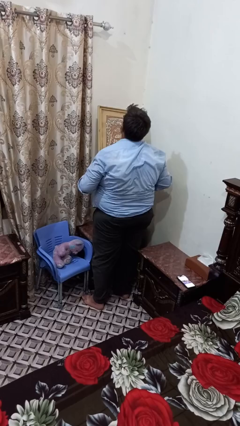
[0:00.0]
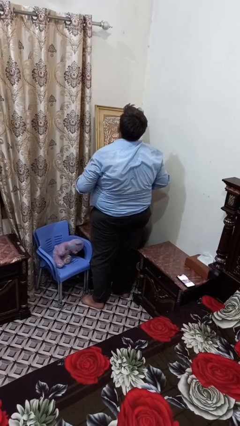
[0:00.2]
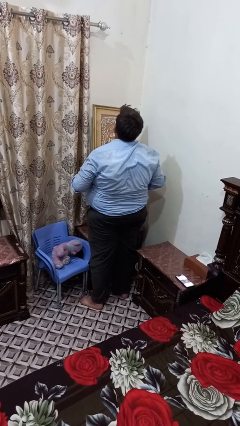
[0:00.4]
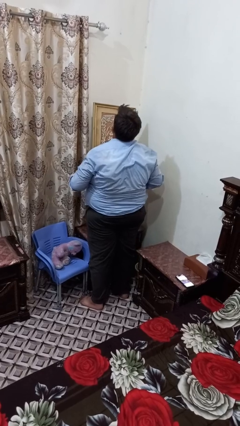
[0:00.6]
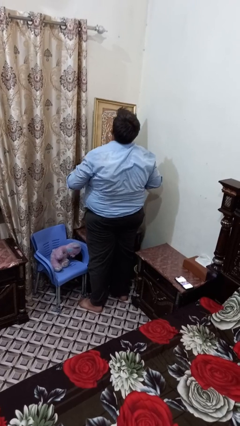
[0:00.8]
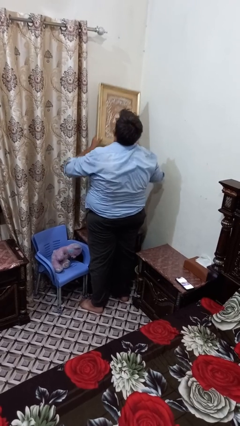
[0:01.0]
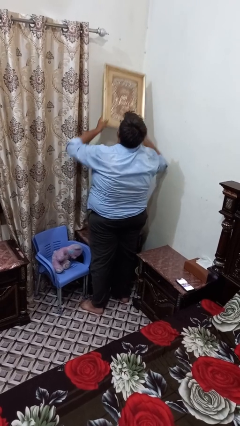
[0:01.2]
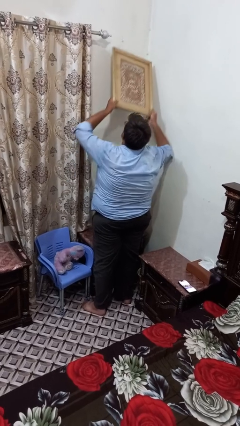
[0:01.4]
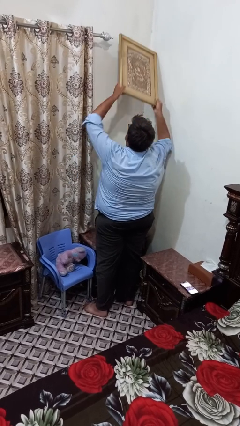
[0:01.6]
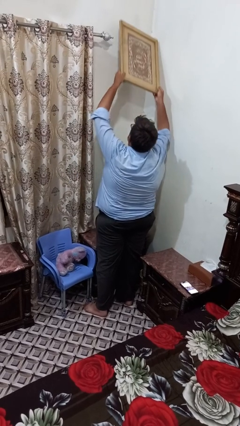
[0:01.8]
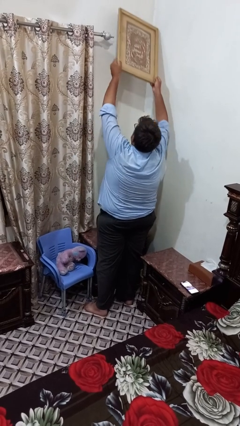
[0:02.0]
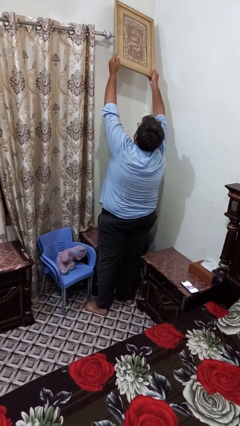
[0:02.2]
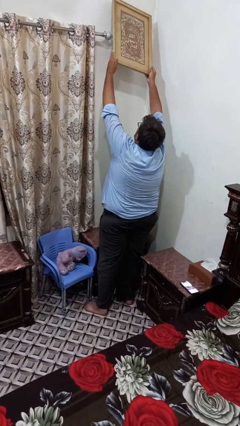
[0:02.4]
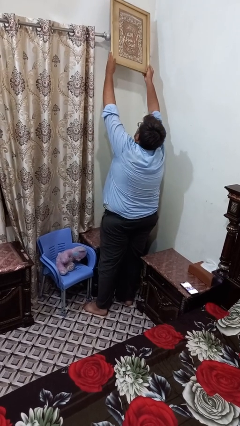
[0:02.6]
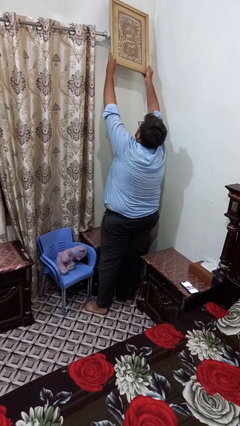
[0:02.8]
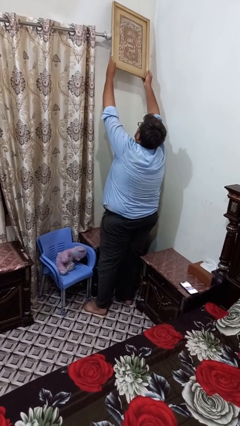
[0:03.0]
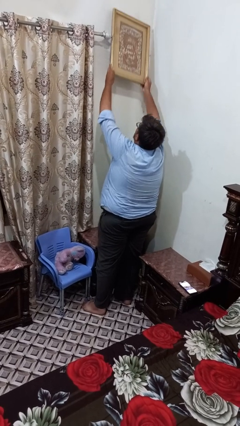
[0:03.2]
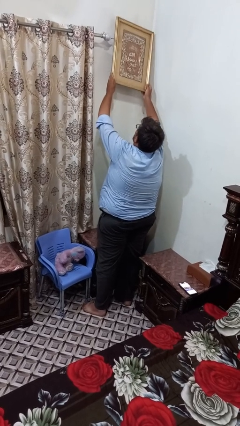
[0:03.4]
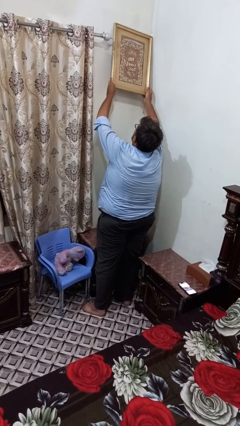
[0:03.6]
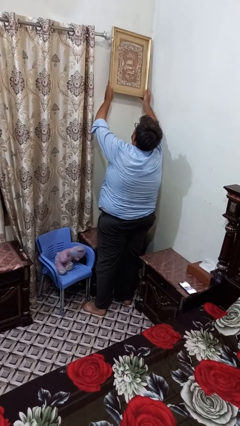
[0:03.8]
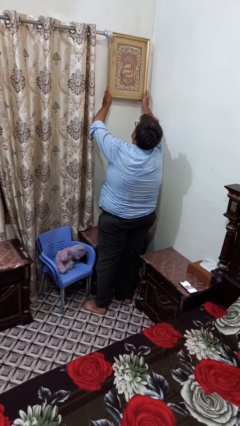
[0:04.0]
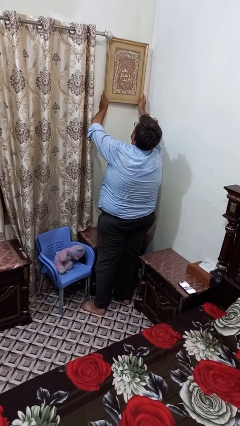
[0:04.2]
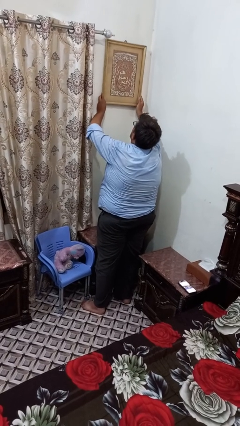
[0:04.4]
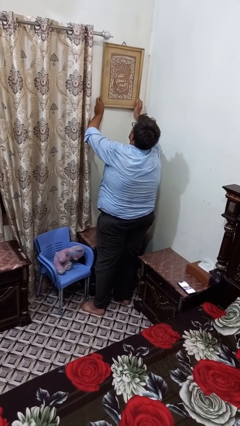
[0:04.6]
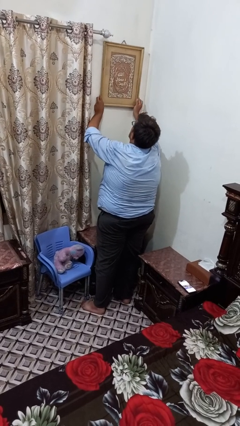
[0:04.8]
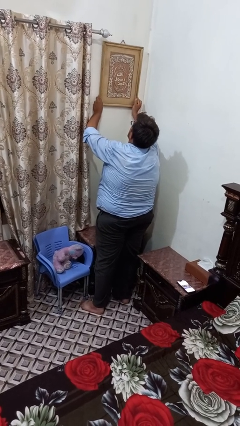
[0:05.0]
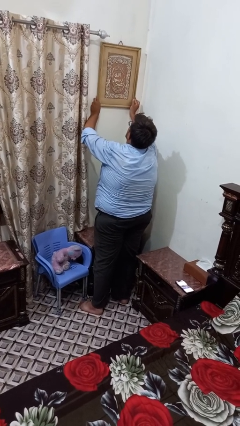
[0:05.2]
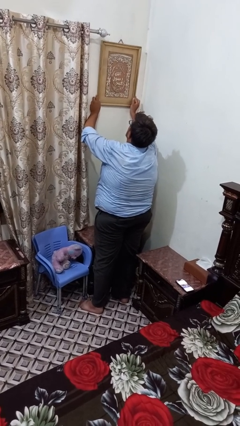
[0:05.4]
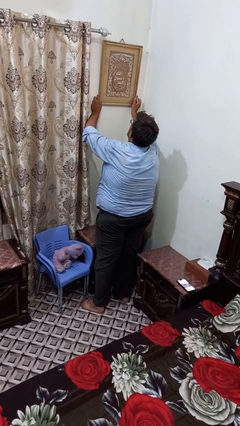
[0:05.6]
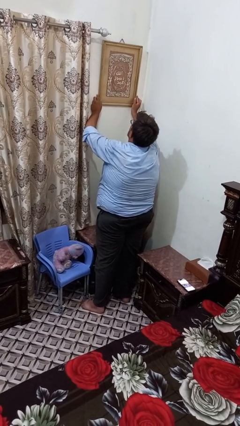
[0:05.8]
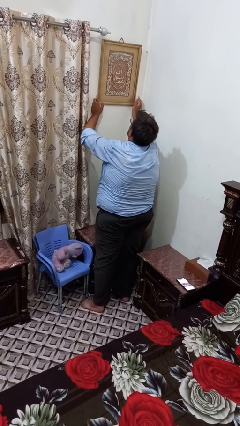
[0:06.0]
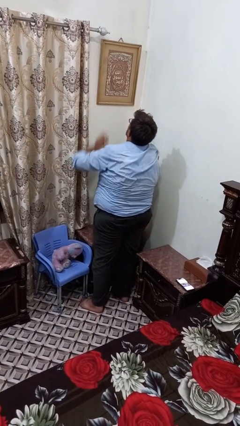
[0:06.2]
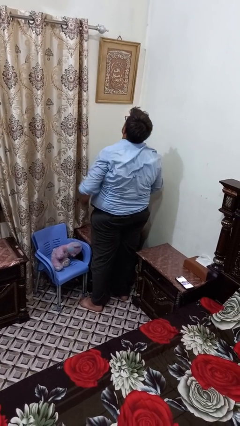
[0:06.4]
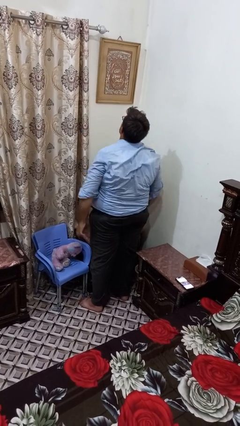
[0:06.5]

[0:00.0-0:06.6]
person puts up picture frame

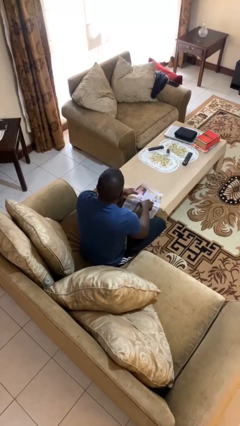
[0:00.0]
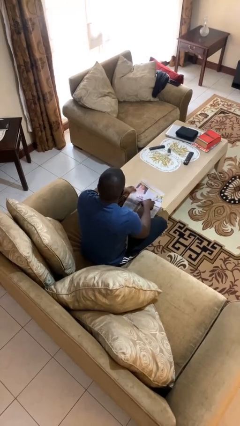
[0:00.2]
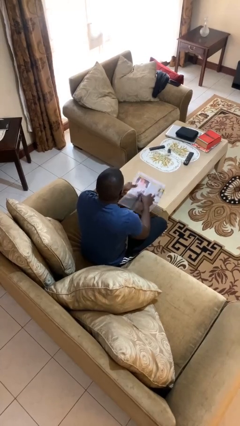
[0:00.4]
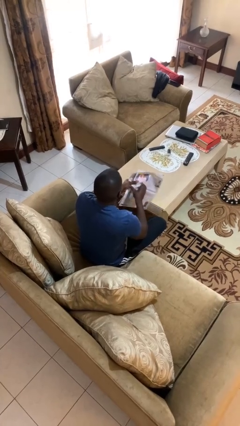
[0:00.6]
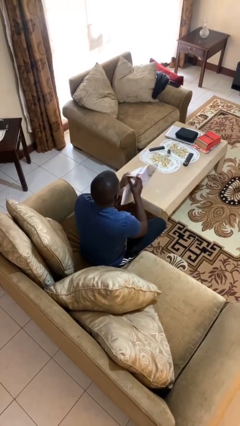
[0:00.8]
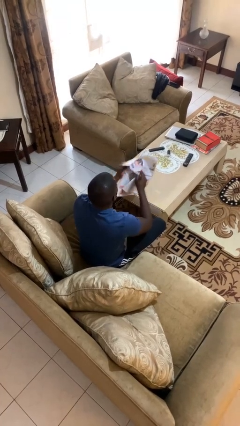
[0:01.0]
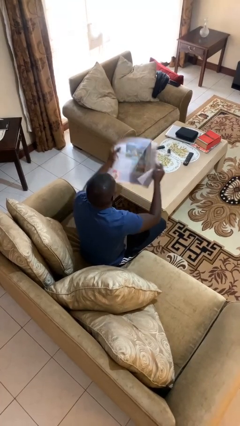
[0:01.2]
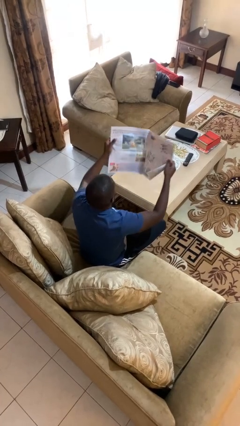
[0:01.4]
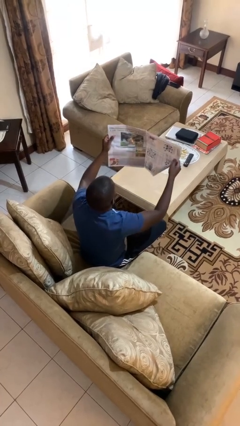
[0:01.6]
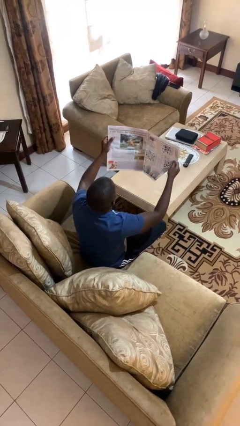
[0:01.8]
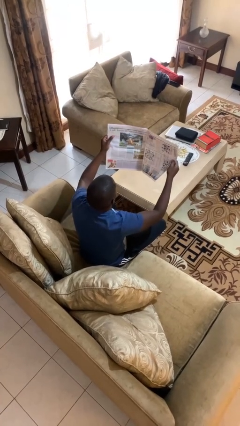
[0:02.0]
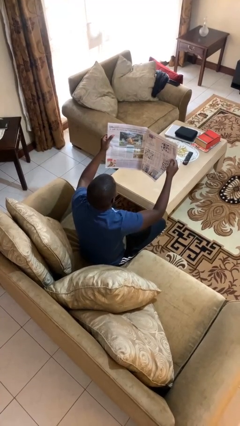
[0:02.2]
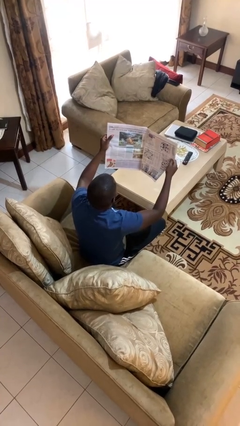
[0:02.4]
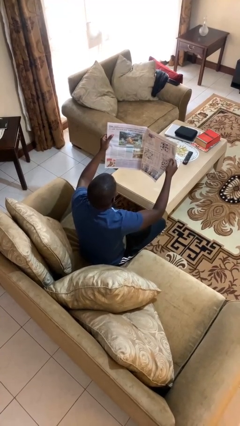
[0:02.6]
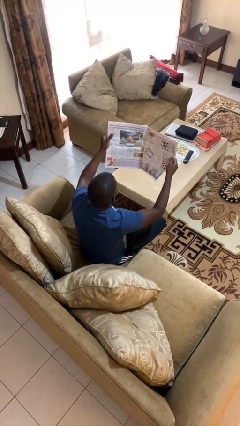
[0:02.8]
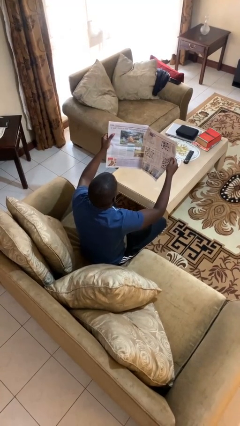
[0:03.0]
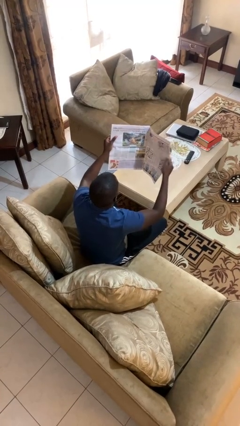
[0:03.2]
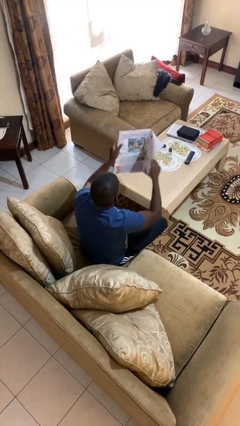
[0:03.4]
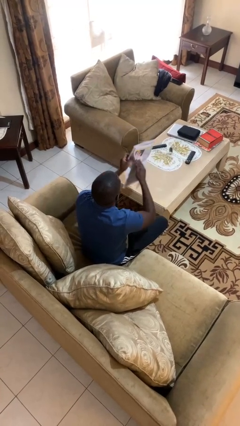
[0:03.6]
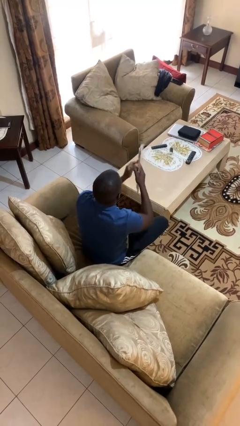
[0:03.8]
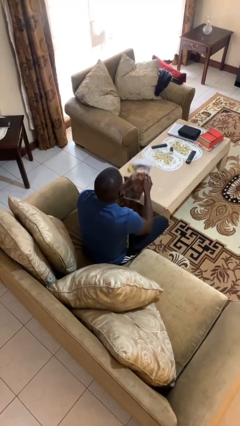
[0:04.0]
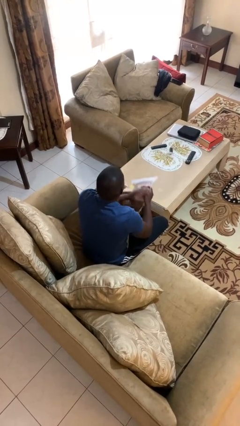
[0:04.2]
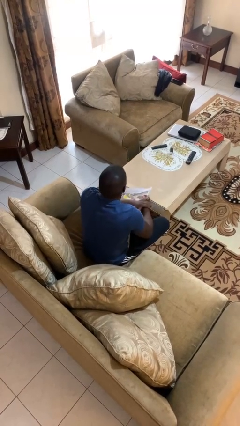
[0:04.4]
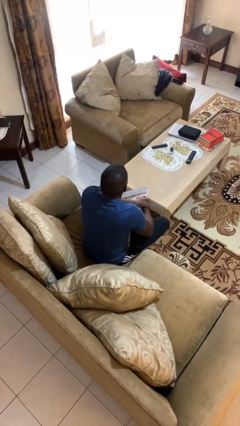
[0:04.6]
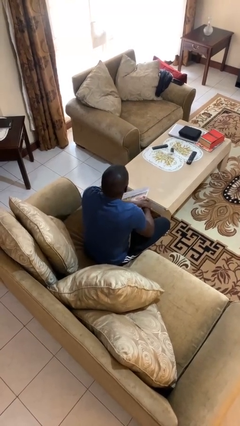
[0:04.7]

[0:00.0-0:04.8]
person reads newspaper

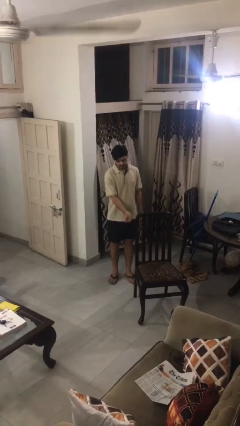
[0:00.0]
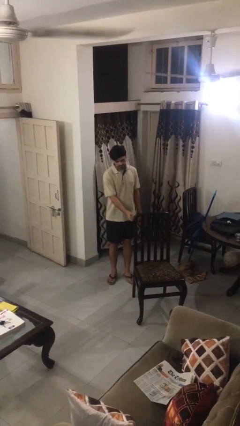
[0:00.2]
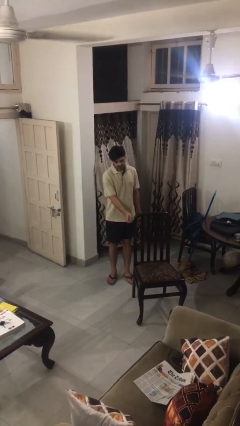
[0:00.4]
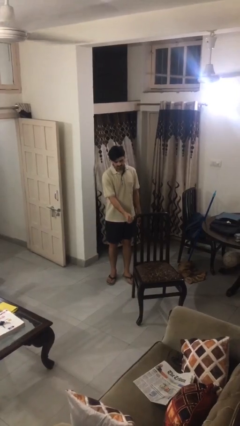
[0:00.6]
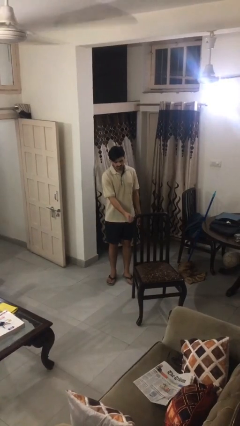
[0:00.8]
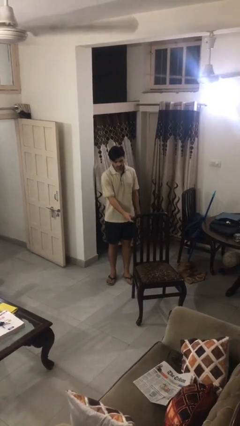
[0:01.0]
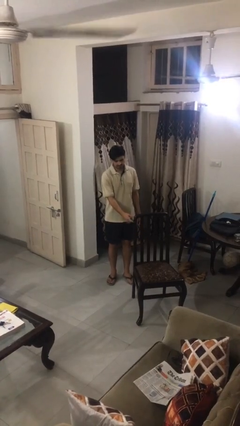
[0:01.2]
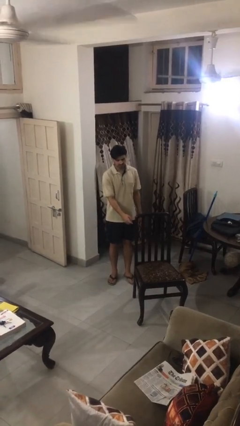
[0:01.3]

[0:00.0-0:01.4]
person taps object with finger

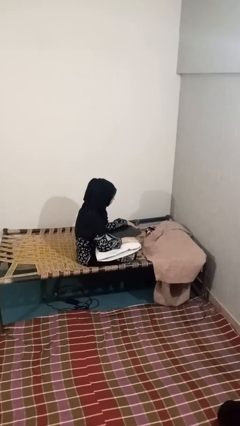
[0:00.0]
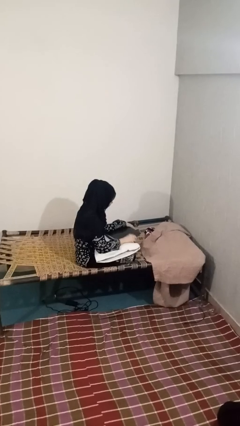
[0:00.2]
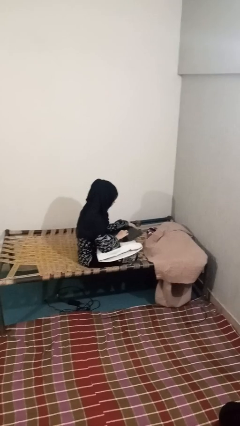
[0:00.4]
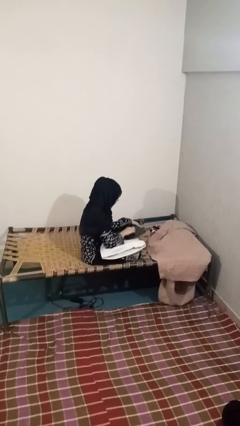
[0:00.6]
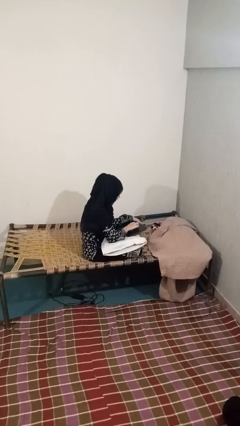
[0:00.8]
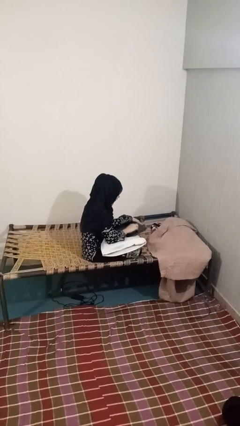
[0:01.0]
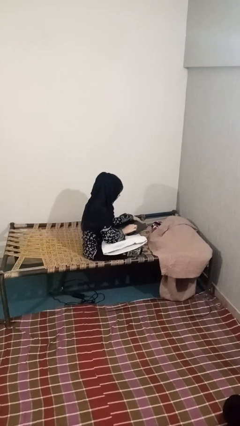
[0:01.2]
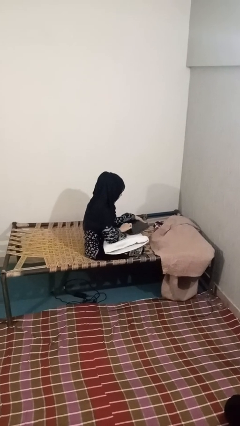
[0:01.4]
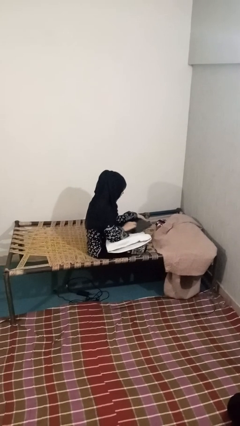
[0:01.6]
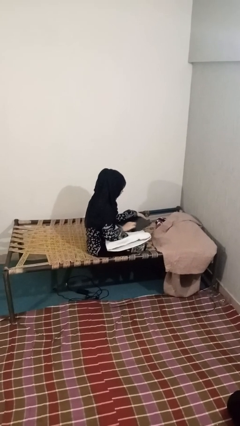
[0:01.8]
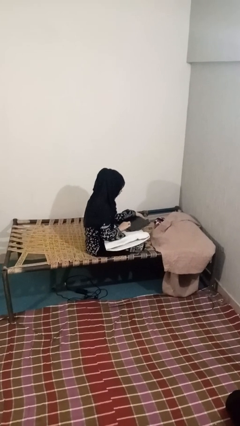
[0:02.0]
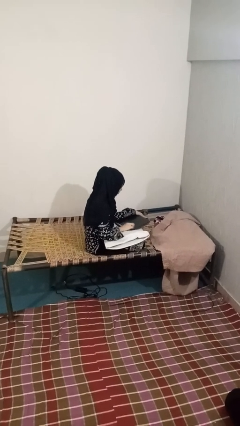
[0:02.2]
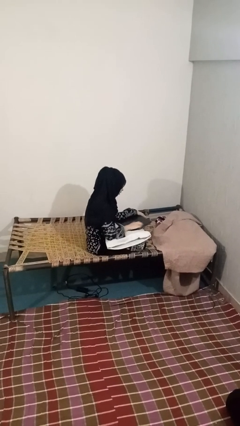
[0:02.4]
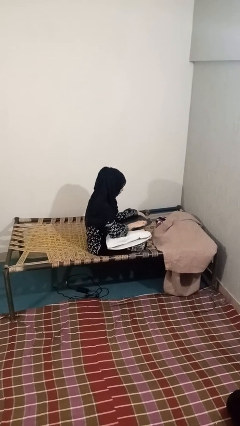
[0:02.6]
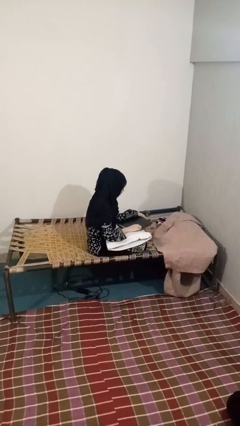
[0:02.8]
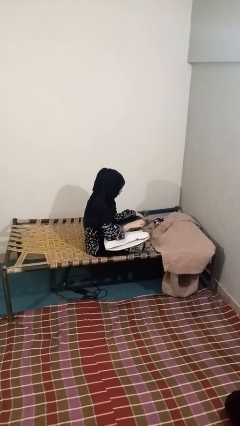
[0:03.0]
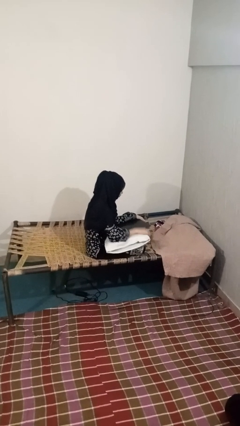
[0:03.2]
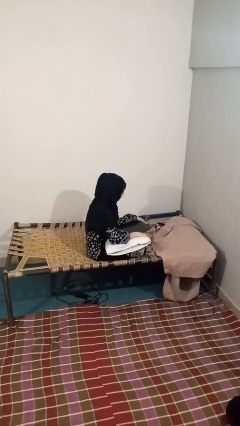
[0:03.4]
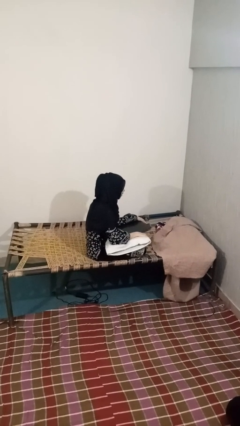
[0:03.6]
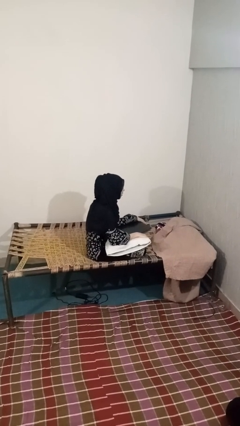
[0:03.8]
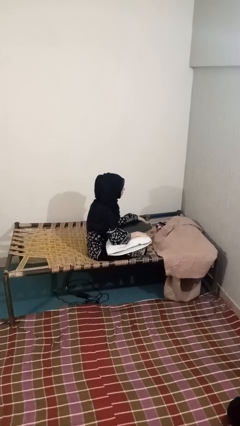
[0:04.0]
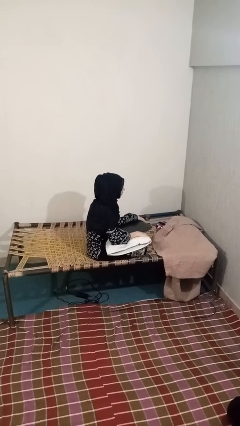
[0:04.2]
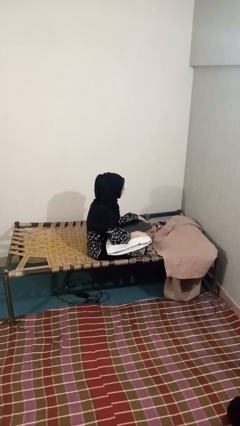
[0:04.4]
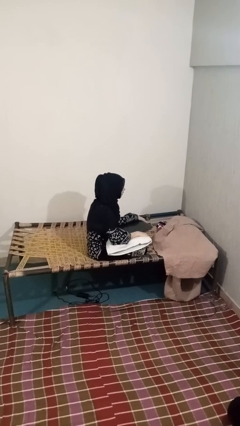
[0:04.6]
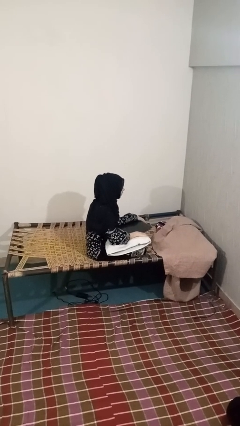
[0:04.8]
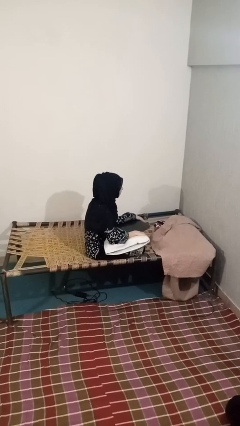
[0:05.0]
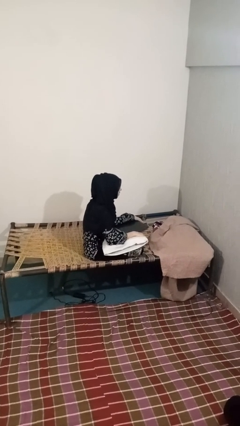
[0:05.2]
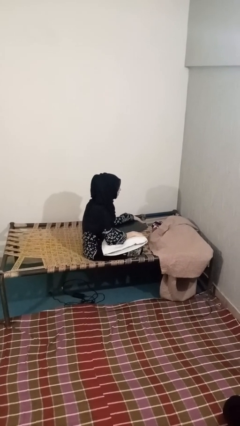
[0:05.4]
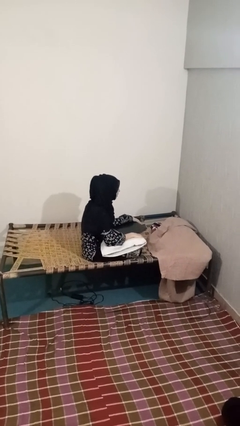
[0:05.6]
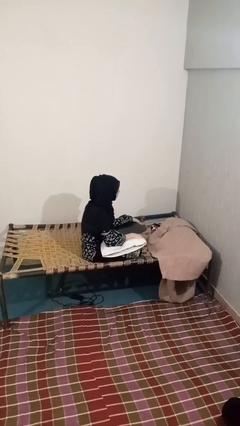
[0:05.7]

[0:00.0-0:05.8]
person interacts with tablet
